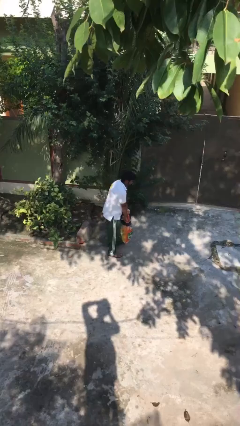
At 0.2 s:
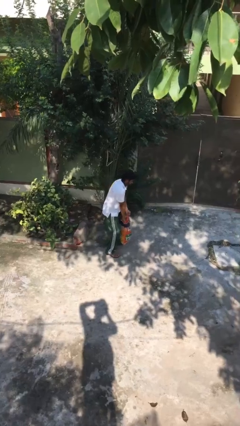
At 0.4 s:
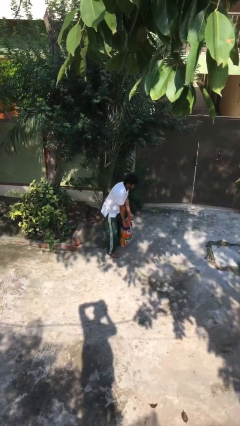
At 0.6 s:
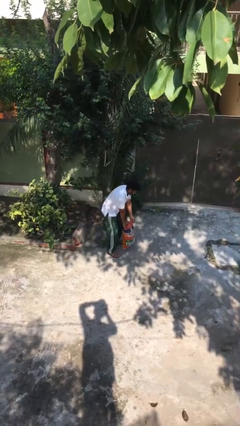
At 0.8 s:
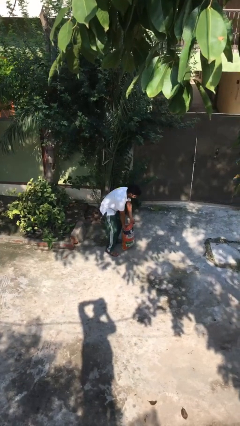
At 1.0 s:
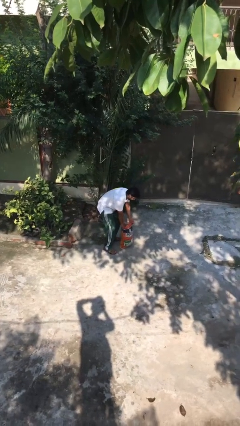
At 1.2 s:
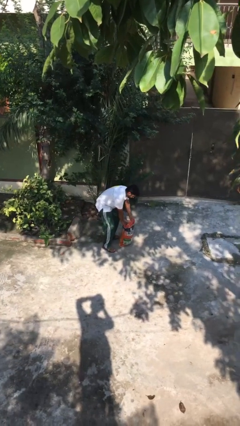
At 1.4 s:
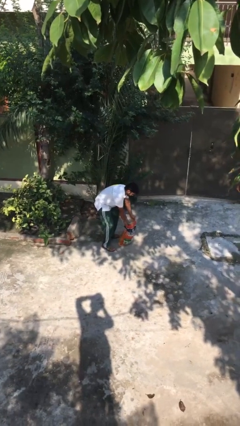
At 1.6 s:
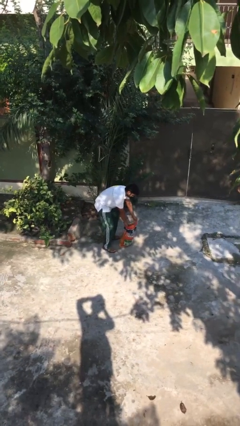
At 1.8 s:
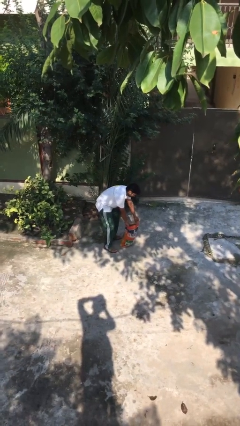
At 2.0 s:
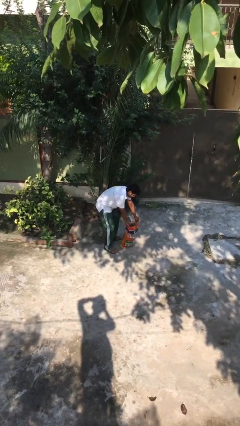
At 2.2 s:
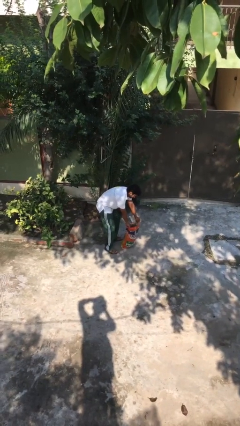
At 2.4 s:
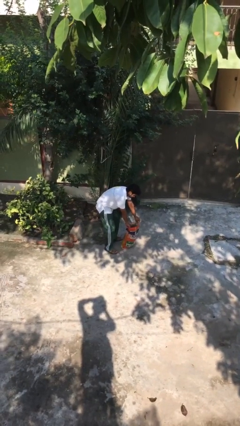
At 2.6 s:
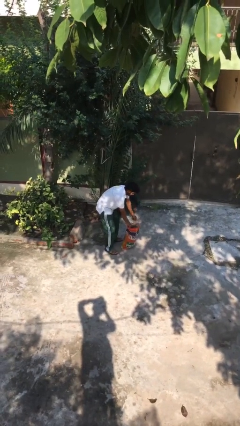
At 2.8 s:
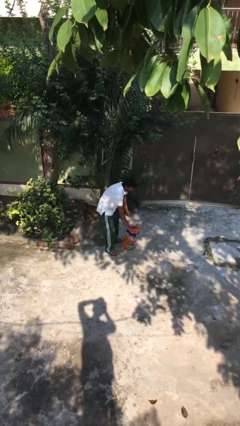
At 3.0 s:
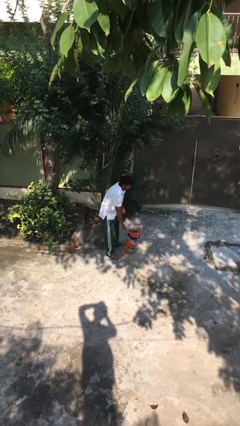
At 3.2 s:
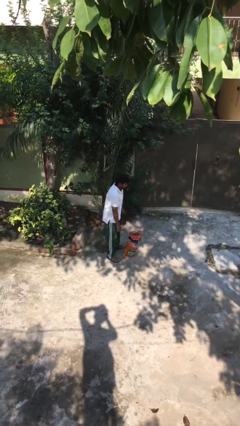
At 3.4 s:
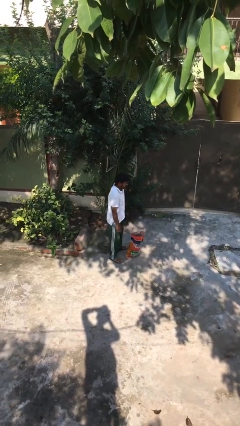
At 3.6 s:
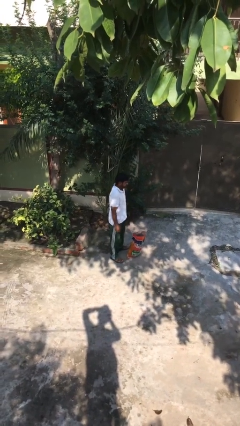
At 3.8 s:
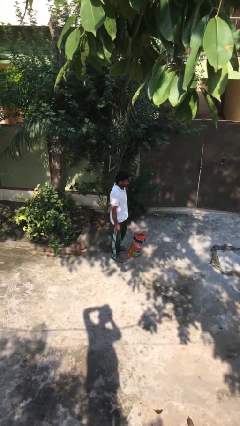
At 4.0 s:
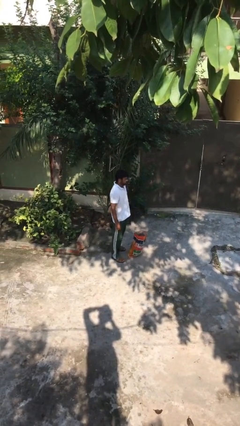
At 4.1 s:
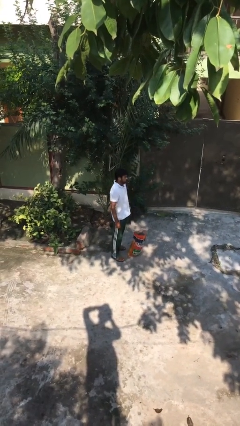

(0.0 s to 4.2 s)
person puts down object on floor

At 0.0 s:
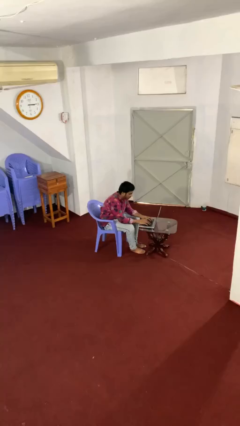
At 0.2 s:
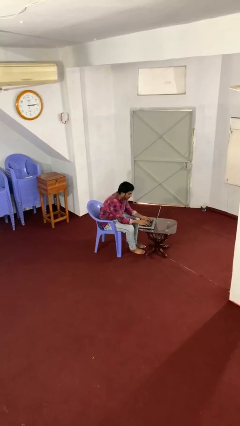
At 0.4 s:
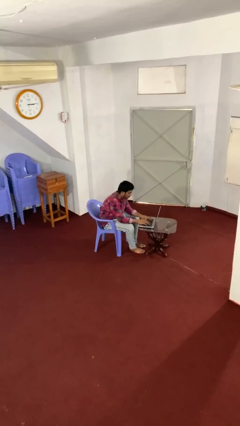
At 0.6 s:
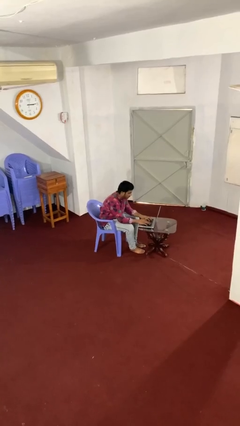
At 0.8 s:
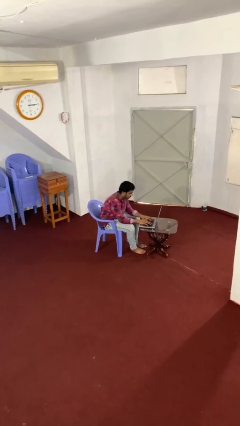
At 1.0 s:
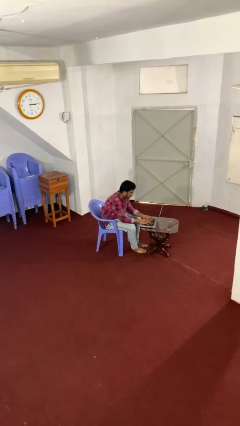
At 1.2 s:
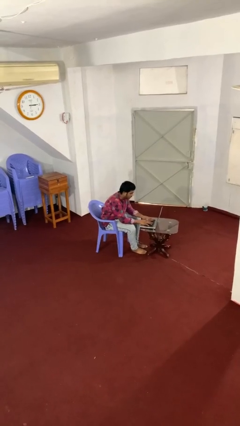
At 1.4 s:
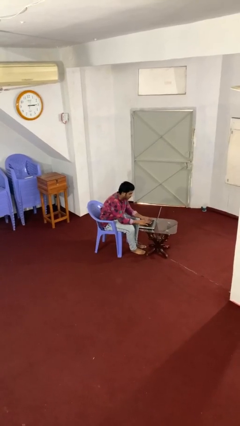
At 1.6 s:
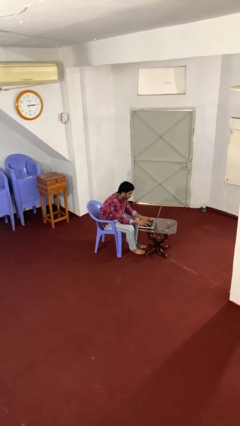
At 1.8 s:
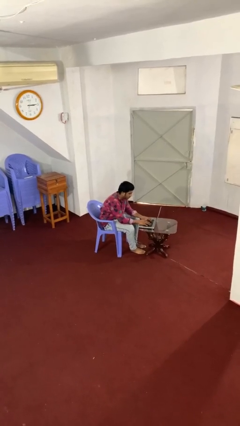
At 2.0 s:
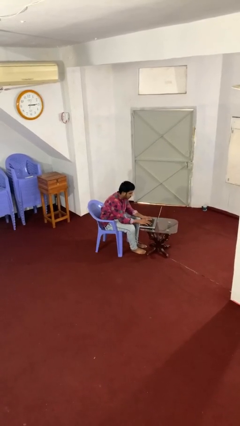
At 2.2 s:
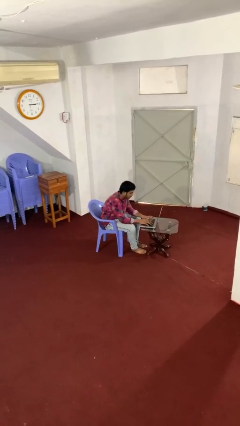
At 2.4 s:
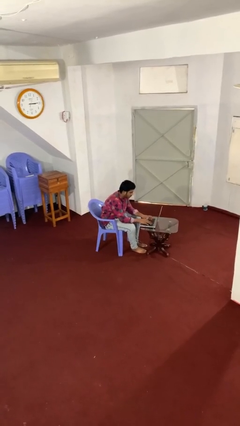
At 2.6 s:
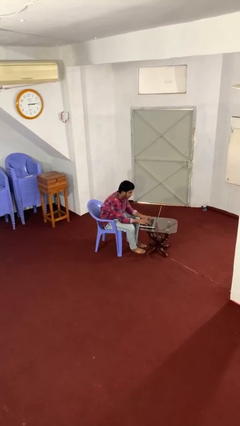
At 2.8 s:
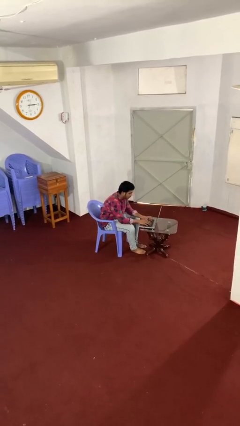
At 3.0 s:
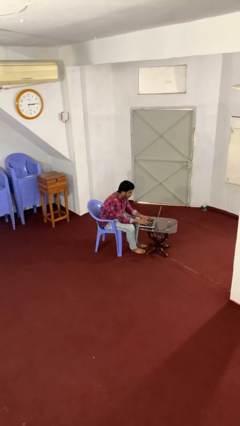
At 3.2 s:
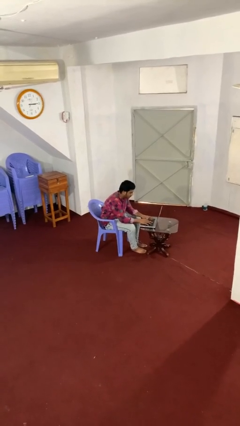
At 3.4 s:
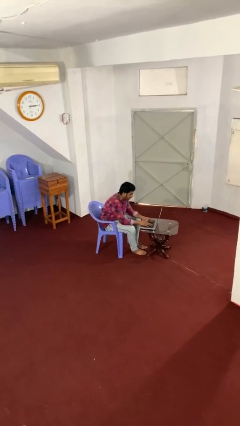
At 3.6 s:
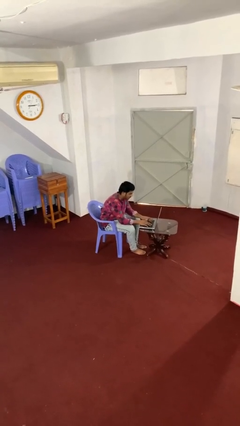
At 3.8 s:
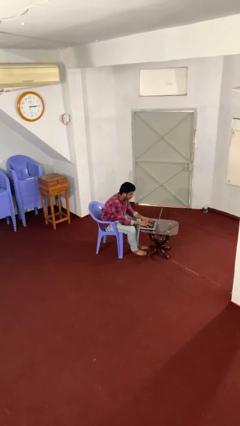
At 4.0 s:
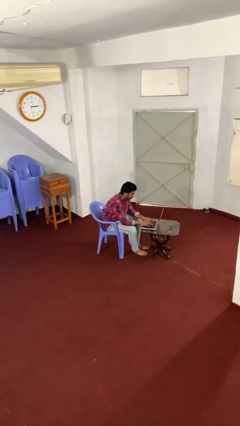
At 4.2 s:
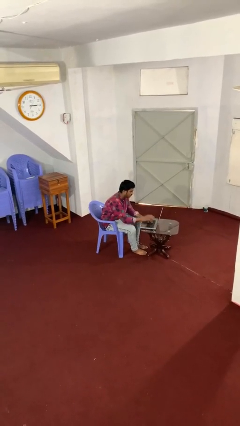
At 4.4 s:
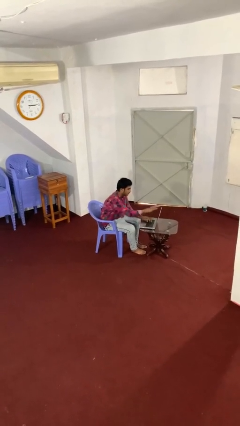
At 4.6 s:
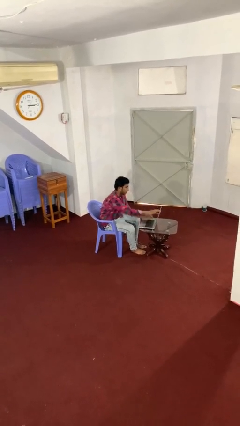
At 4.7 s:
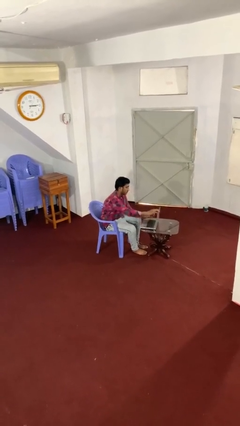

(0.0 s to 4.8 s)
person interacts with laptop

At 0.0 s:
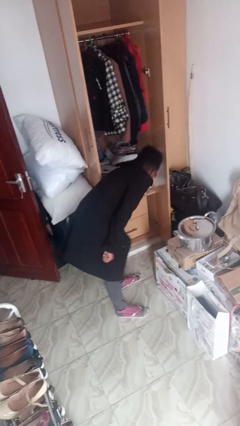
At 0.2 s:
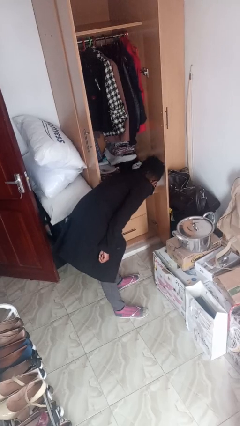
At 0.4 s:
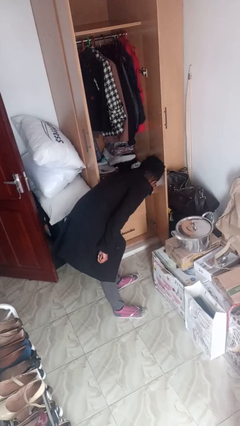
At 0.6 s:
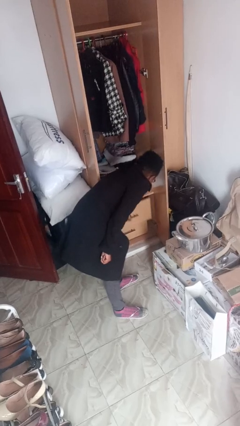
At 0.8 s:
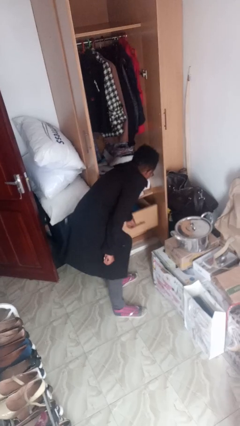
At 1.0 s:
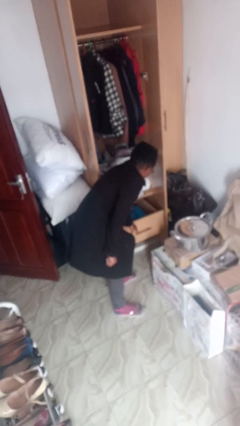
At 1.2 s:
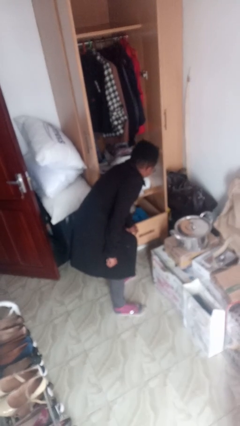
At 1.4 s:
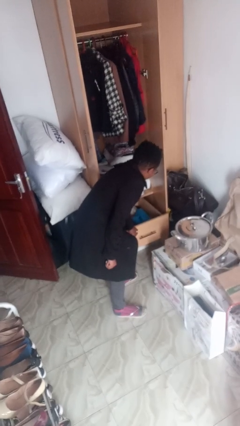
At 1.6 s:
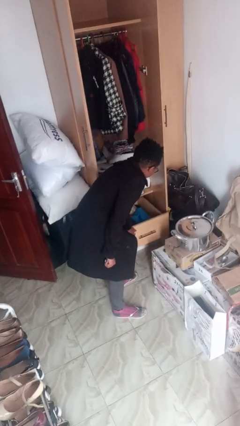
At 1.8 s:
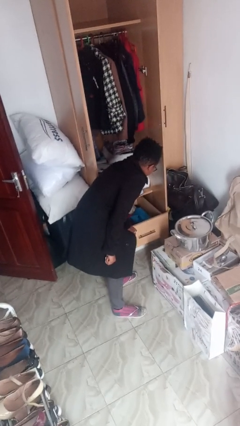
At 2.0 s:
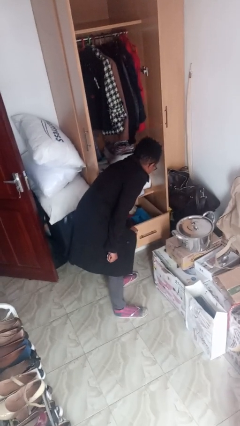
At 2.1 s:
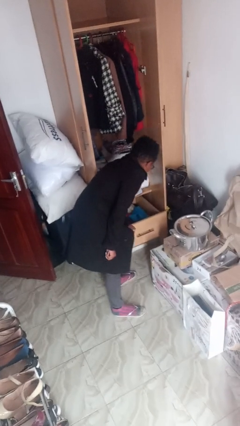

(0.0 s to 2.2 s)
person opens dresser drawer

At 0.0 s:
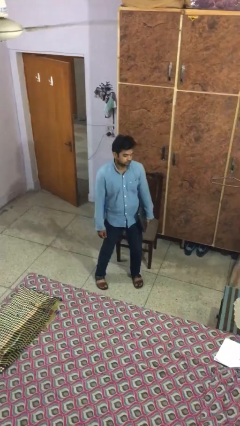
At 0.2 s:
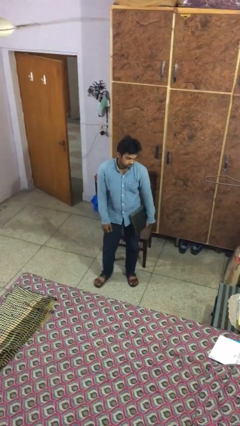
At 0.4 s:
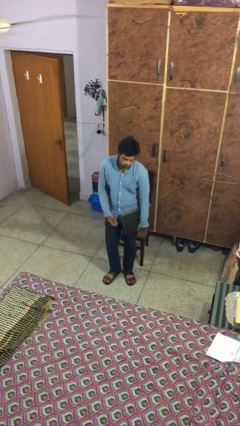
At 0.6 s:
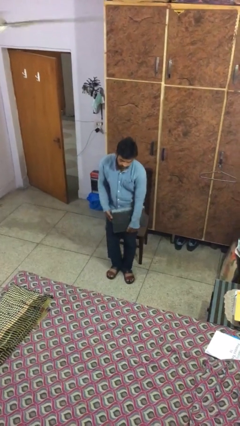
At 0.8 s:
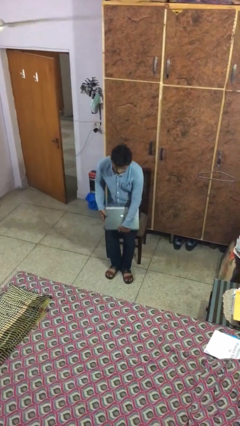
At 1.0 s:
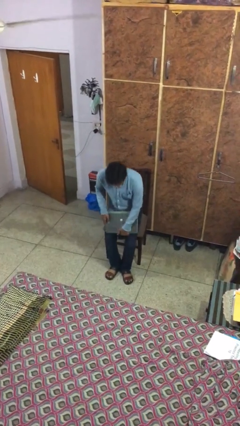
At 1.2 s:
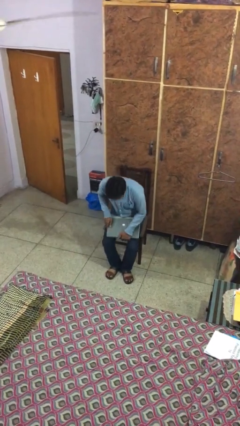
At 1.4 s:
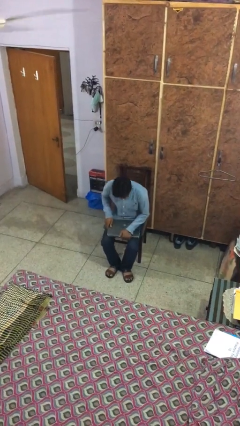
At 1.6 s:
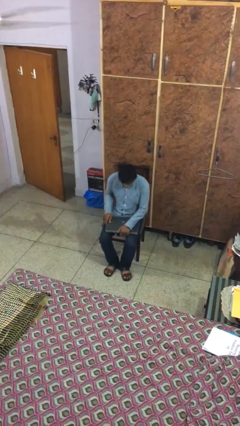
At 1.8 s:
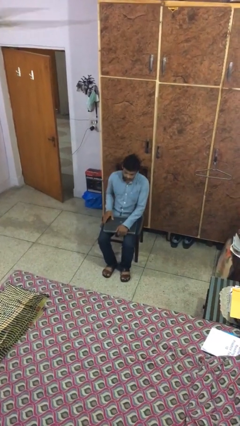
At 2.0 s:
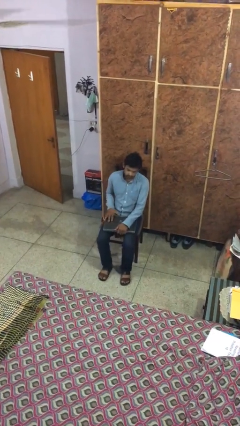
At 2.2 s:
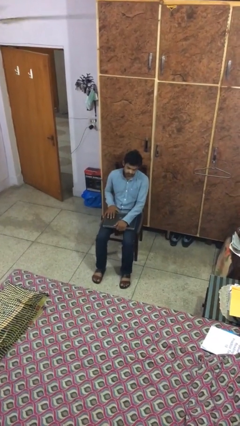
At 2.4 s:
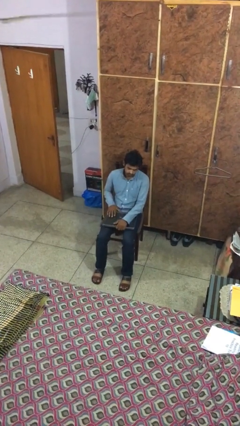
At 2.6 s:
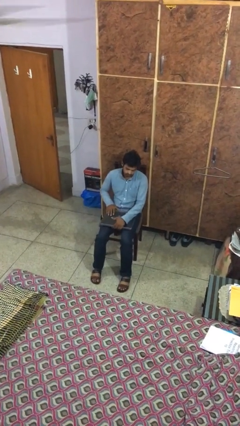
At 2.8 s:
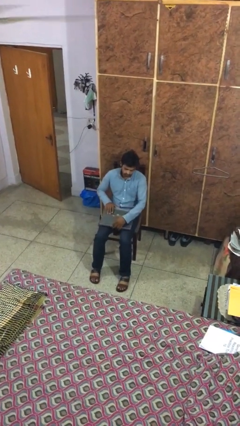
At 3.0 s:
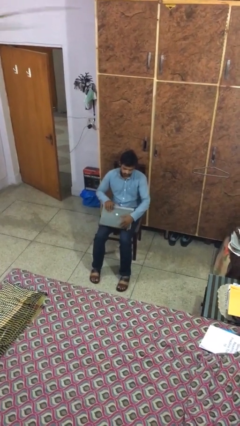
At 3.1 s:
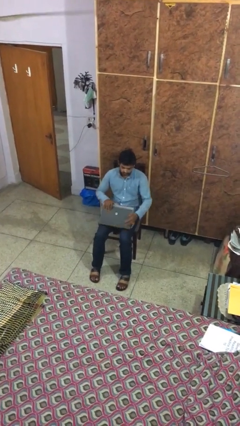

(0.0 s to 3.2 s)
person sits down

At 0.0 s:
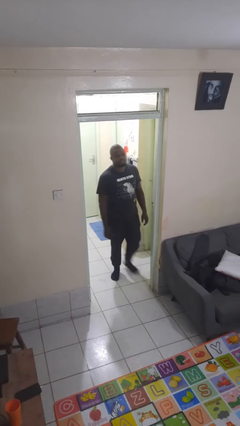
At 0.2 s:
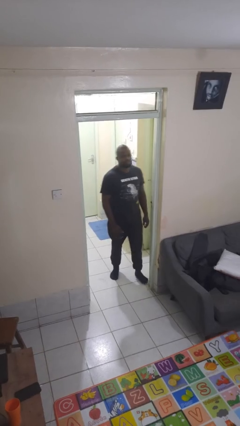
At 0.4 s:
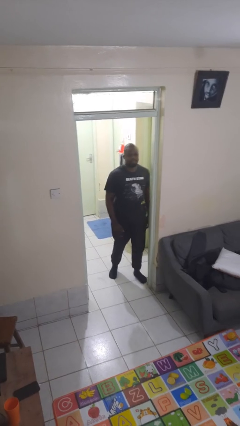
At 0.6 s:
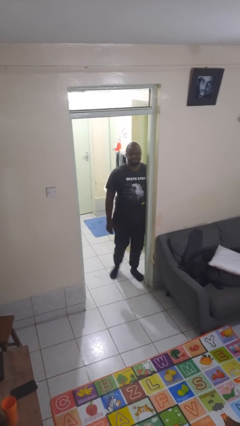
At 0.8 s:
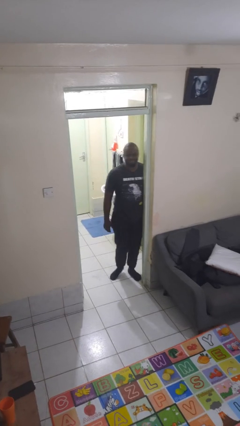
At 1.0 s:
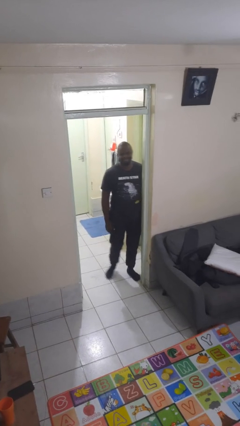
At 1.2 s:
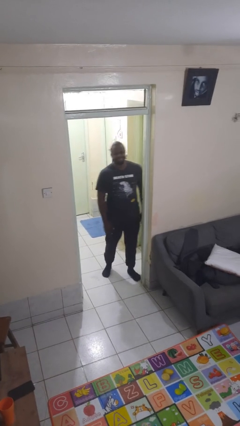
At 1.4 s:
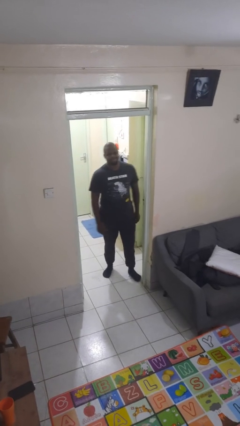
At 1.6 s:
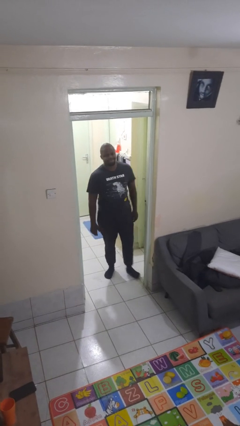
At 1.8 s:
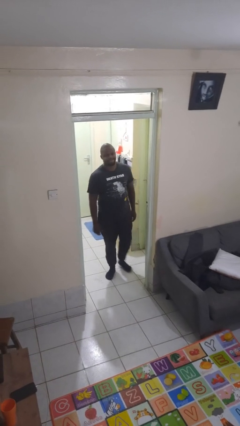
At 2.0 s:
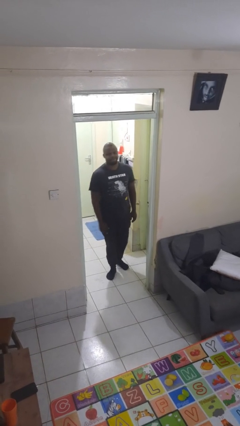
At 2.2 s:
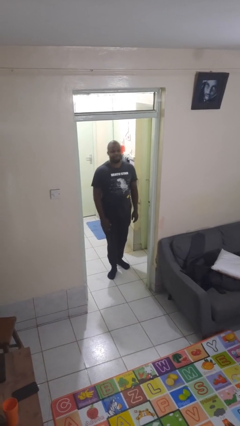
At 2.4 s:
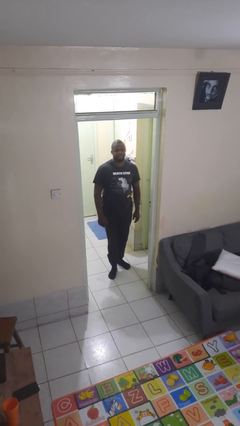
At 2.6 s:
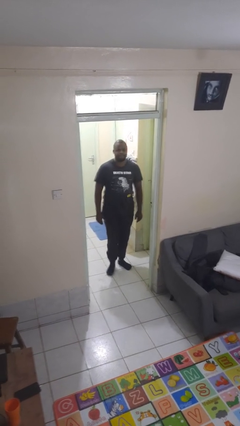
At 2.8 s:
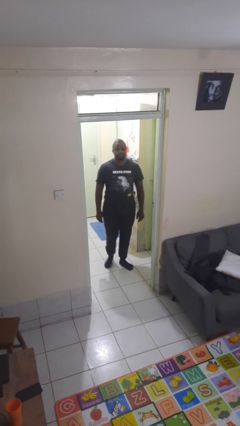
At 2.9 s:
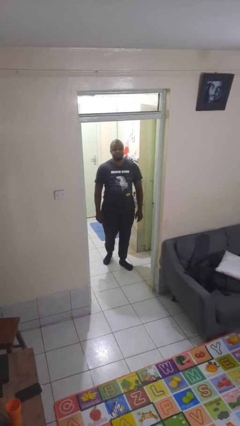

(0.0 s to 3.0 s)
person bumps into wall

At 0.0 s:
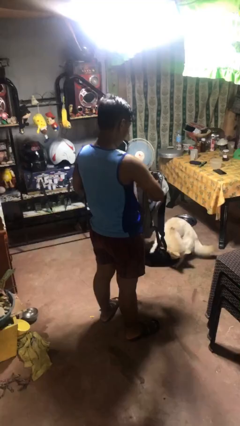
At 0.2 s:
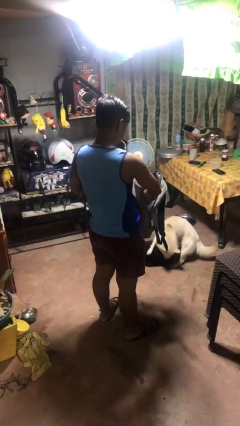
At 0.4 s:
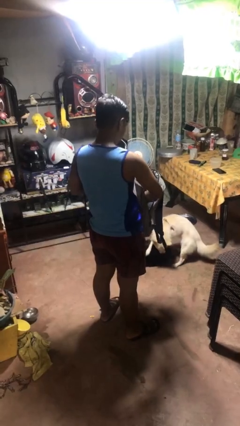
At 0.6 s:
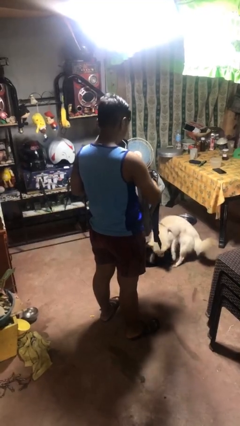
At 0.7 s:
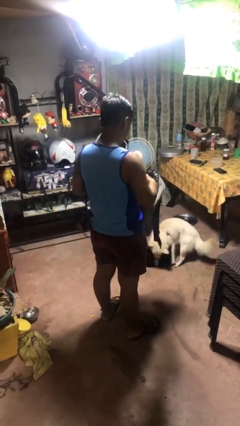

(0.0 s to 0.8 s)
person puts object into bag
